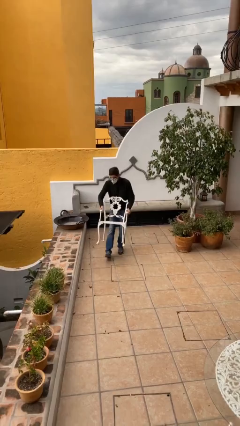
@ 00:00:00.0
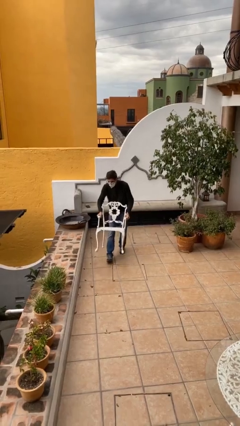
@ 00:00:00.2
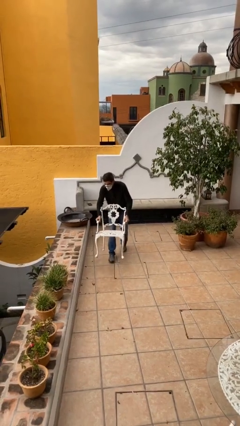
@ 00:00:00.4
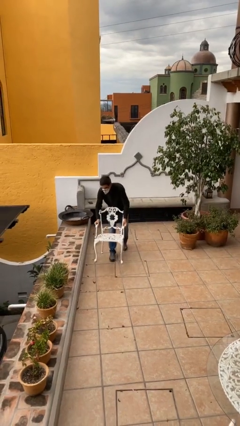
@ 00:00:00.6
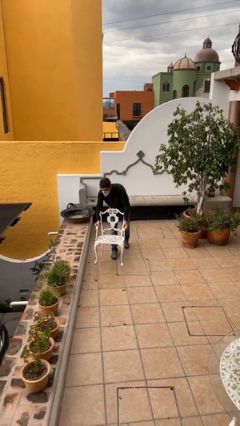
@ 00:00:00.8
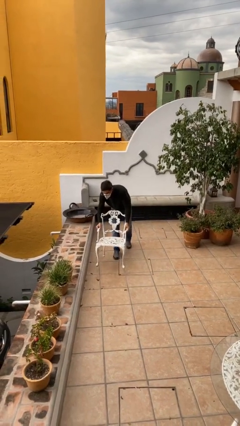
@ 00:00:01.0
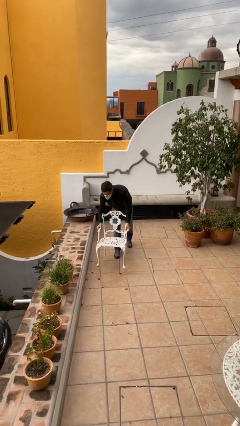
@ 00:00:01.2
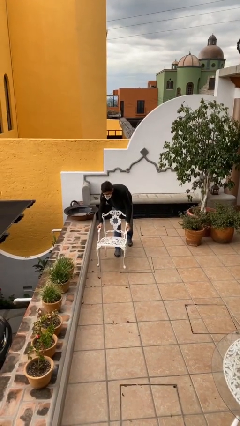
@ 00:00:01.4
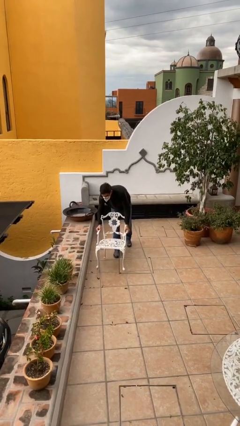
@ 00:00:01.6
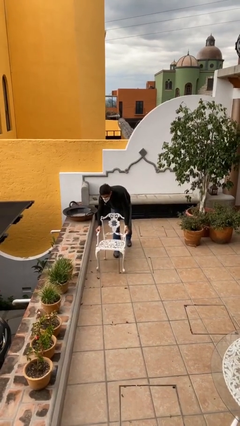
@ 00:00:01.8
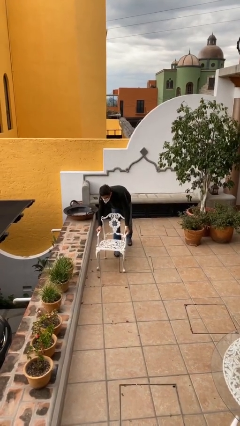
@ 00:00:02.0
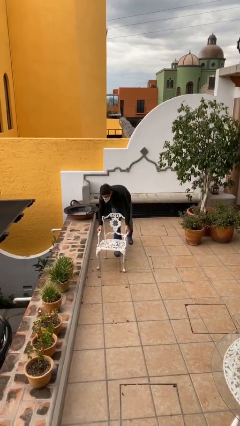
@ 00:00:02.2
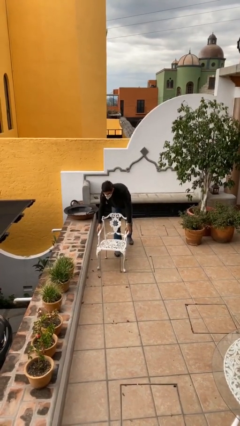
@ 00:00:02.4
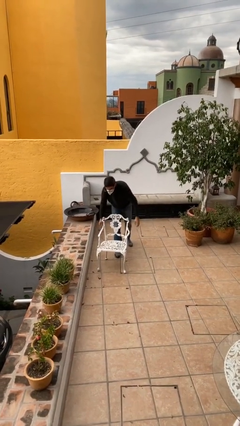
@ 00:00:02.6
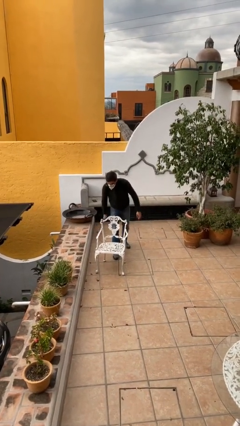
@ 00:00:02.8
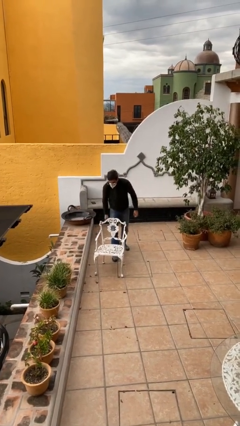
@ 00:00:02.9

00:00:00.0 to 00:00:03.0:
person puts down object on floor

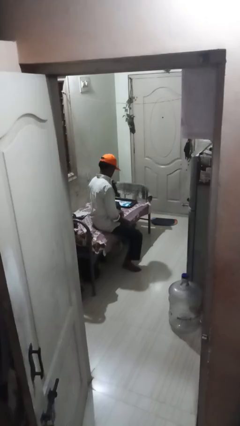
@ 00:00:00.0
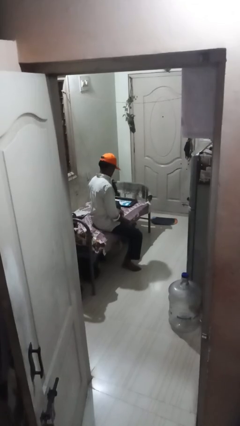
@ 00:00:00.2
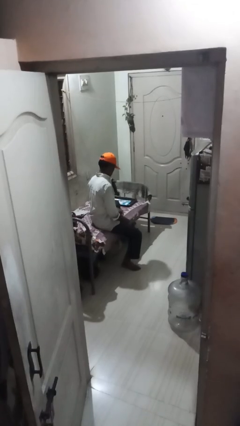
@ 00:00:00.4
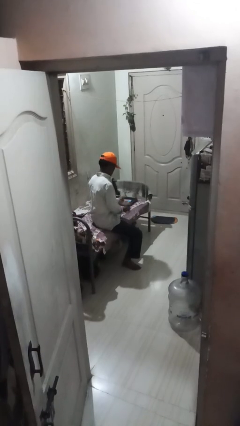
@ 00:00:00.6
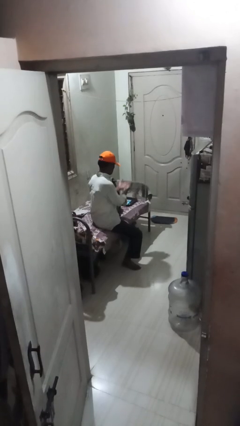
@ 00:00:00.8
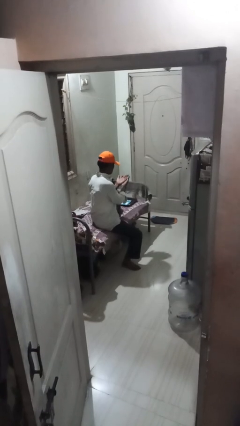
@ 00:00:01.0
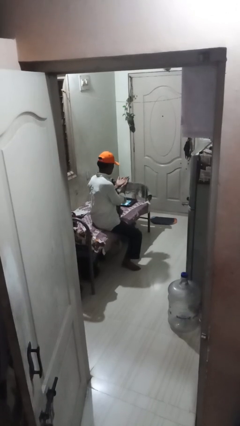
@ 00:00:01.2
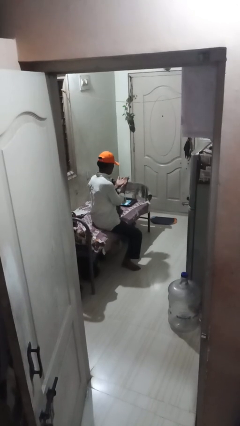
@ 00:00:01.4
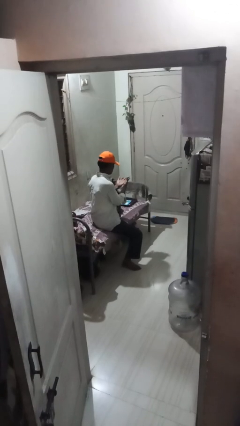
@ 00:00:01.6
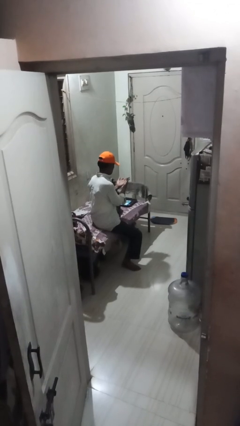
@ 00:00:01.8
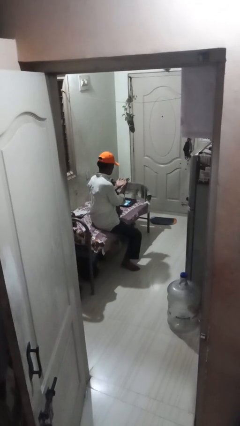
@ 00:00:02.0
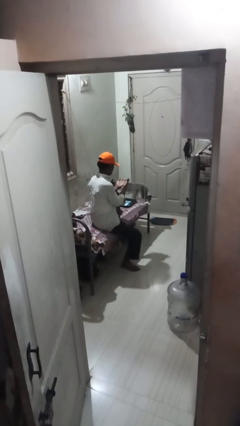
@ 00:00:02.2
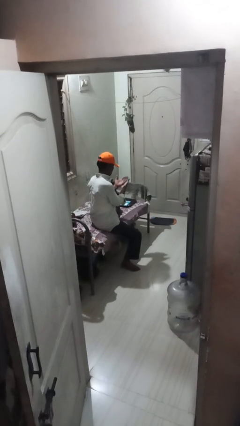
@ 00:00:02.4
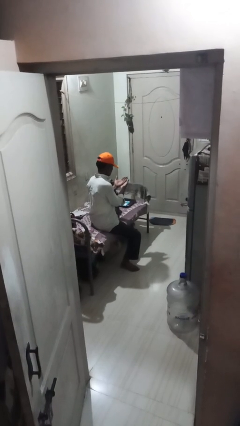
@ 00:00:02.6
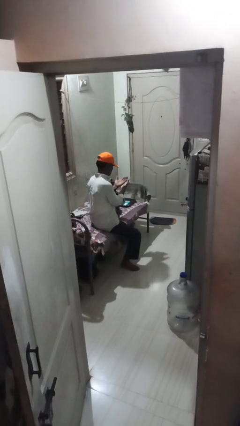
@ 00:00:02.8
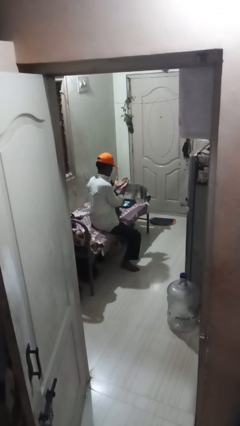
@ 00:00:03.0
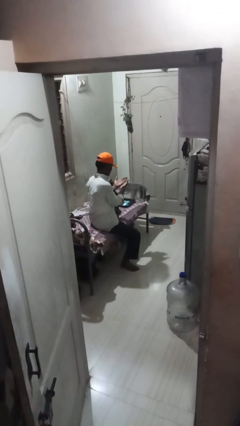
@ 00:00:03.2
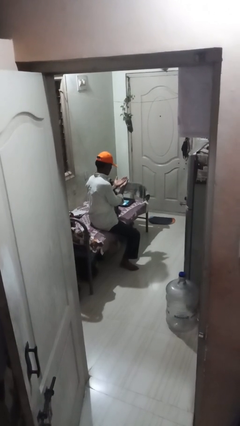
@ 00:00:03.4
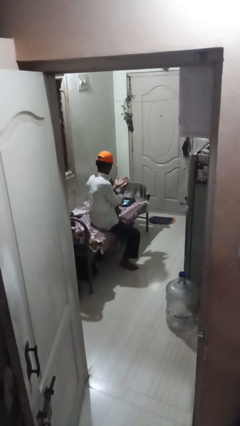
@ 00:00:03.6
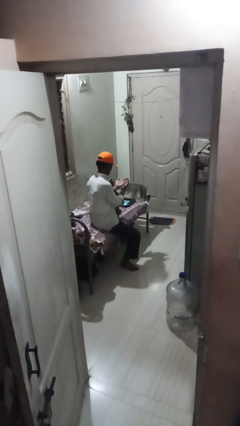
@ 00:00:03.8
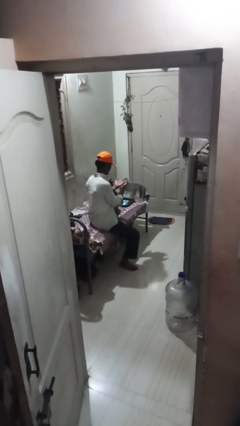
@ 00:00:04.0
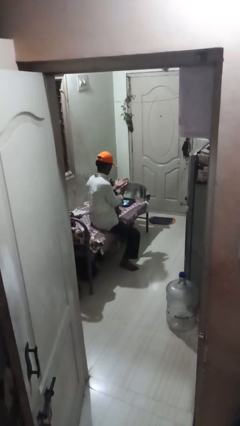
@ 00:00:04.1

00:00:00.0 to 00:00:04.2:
person looks at hands in lap

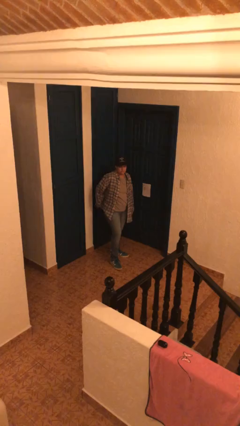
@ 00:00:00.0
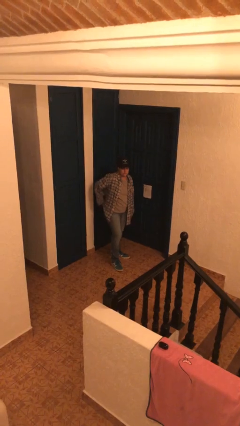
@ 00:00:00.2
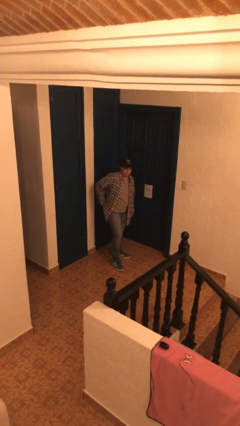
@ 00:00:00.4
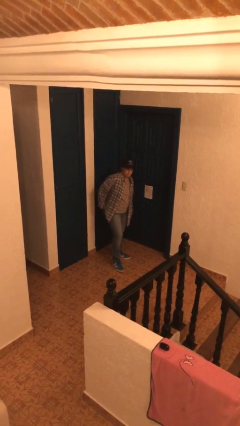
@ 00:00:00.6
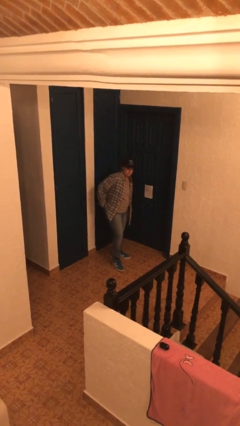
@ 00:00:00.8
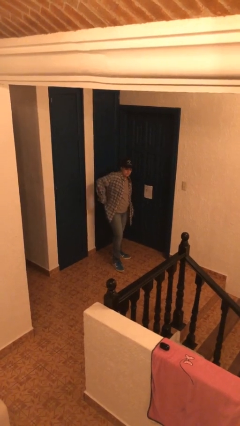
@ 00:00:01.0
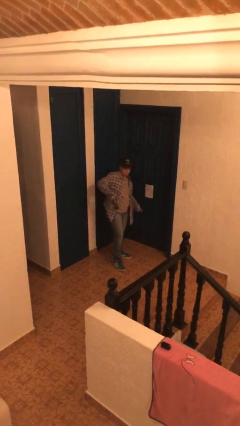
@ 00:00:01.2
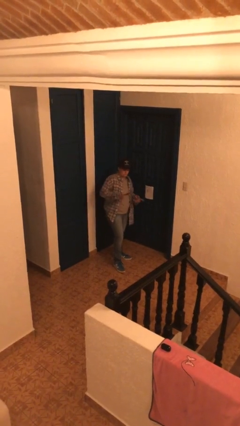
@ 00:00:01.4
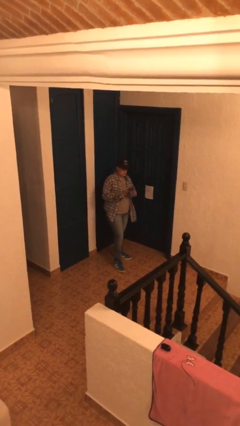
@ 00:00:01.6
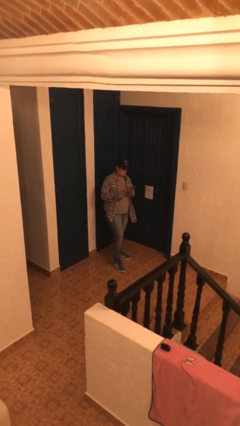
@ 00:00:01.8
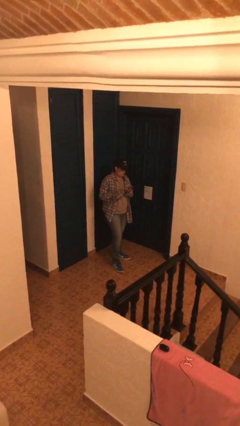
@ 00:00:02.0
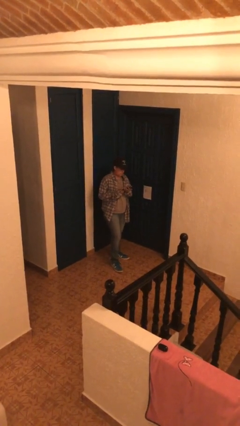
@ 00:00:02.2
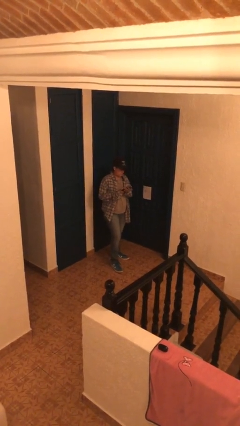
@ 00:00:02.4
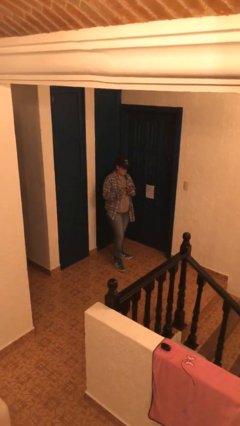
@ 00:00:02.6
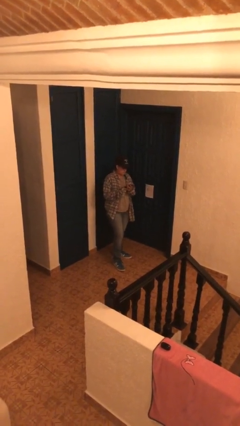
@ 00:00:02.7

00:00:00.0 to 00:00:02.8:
person takes phone from pocket

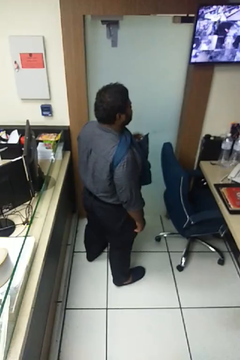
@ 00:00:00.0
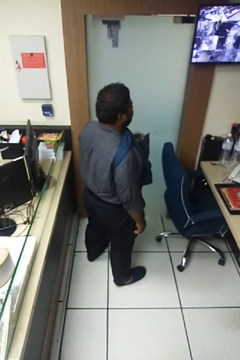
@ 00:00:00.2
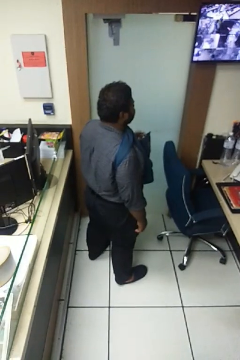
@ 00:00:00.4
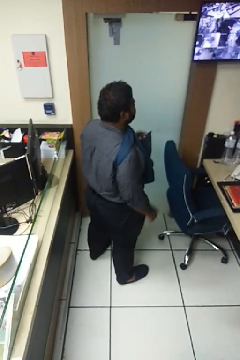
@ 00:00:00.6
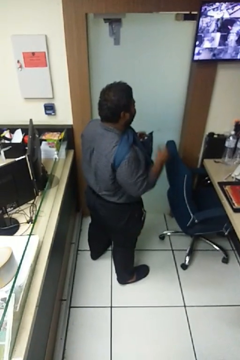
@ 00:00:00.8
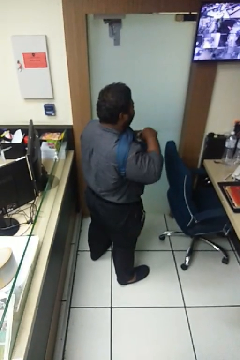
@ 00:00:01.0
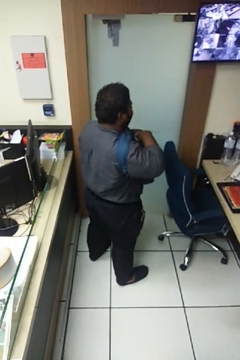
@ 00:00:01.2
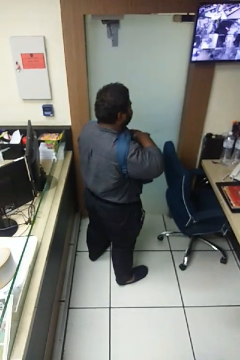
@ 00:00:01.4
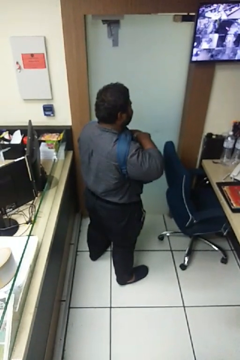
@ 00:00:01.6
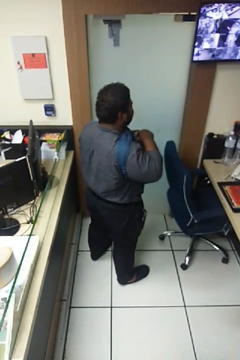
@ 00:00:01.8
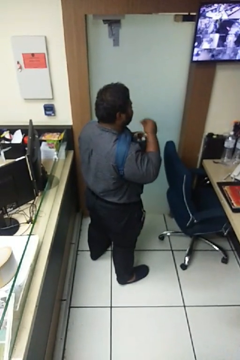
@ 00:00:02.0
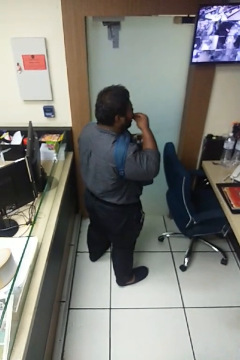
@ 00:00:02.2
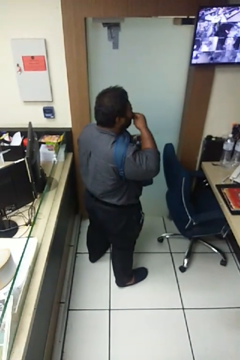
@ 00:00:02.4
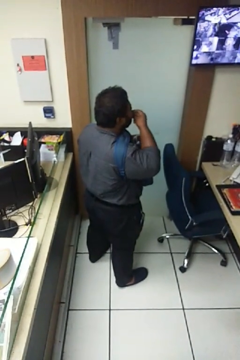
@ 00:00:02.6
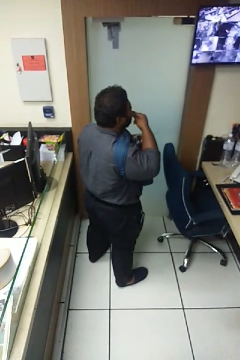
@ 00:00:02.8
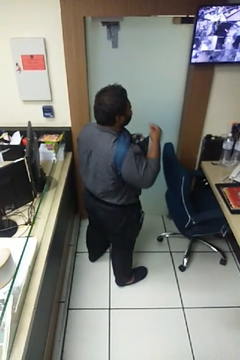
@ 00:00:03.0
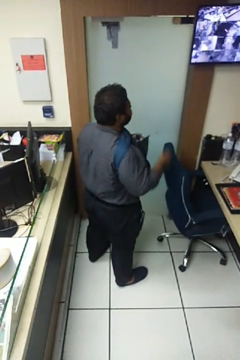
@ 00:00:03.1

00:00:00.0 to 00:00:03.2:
person eats snack from bag

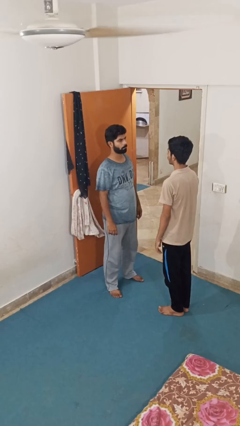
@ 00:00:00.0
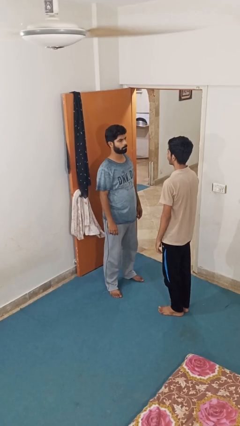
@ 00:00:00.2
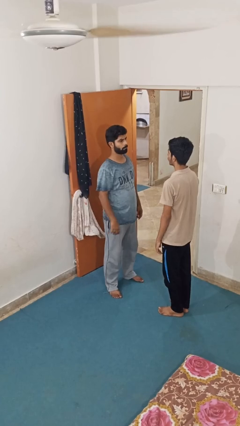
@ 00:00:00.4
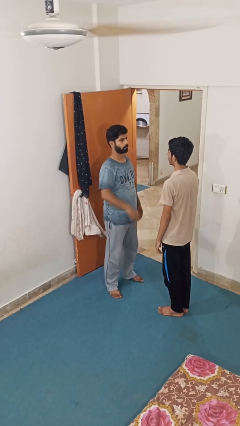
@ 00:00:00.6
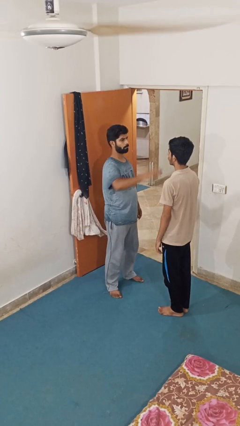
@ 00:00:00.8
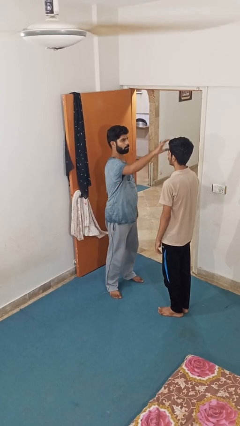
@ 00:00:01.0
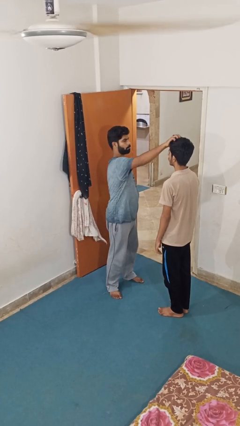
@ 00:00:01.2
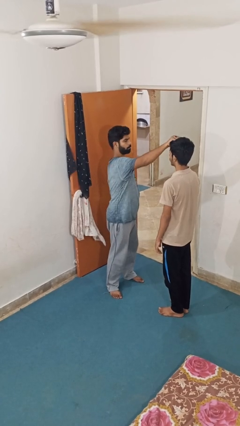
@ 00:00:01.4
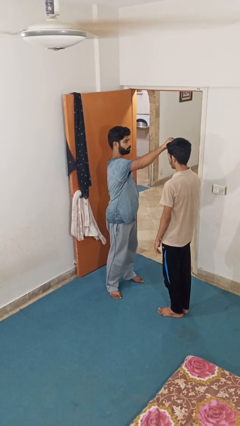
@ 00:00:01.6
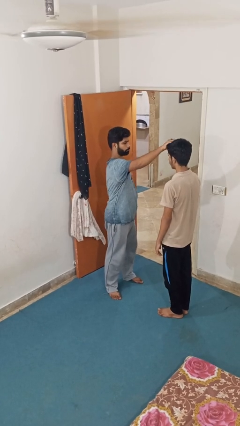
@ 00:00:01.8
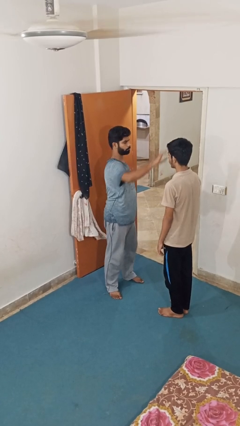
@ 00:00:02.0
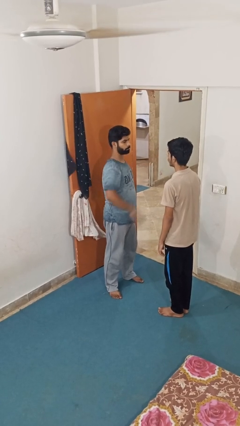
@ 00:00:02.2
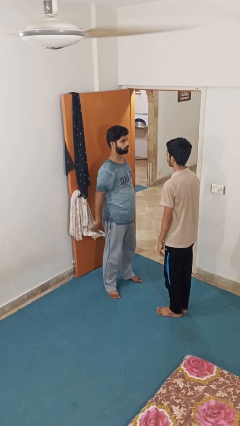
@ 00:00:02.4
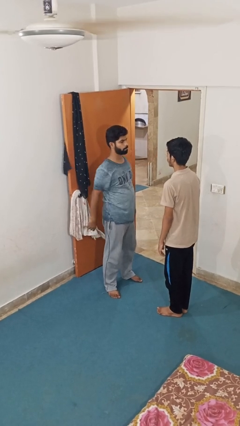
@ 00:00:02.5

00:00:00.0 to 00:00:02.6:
person grabs person by hair

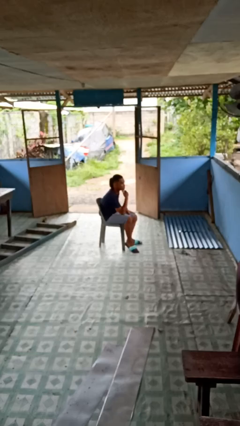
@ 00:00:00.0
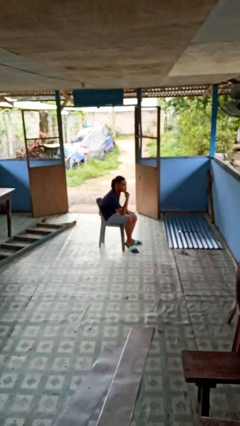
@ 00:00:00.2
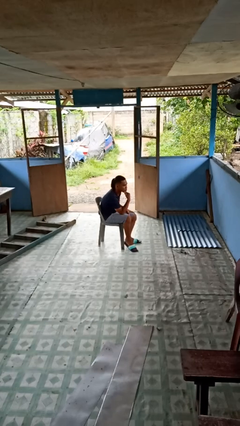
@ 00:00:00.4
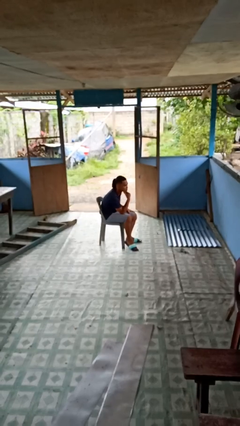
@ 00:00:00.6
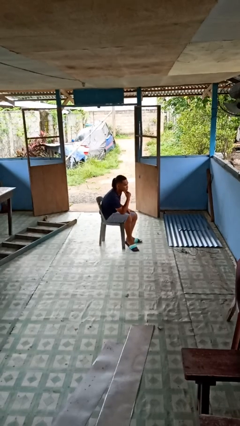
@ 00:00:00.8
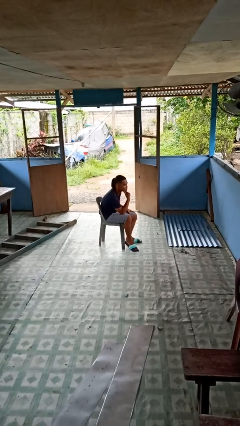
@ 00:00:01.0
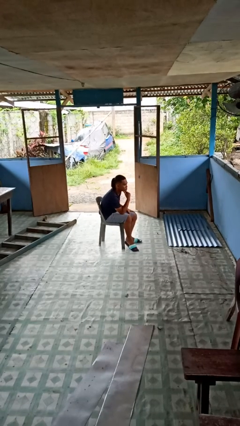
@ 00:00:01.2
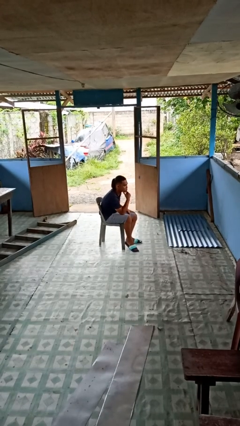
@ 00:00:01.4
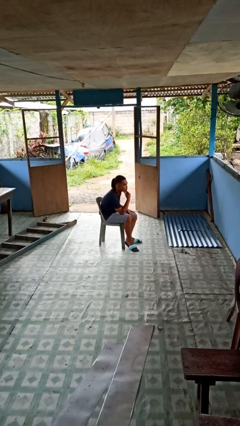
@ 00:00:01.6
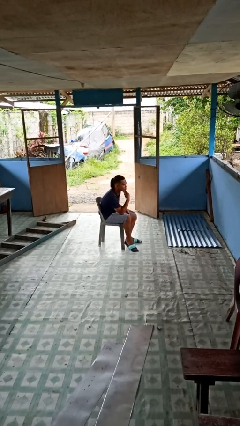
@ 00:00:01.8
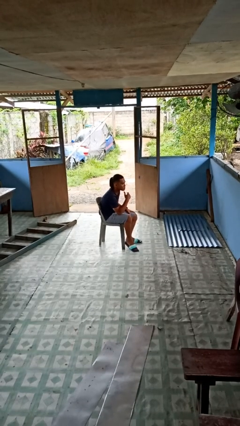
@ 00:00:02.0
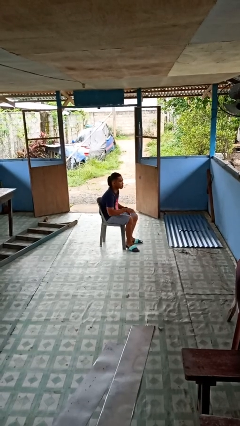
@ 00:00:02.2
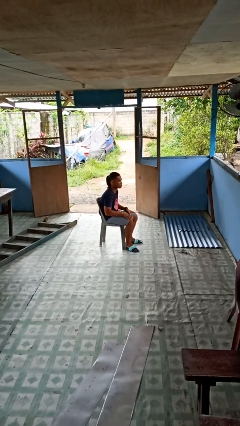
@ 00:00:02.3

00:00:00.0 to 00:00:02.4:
person strokes chin
